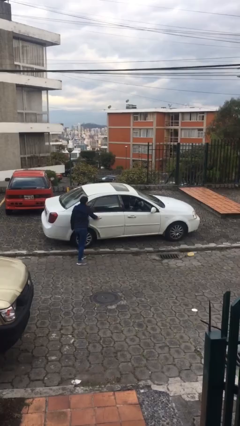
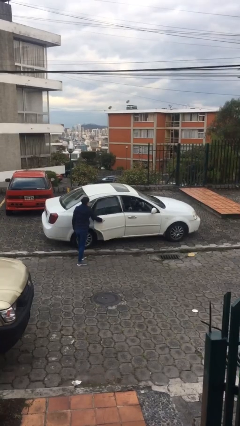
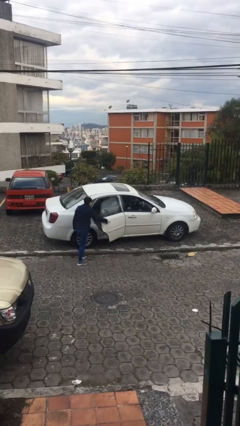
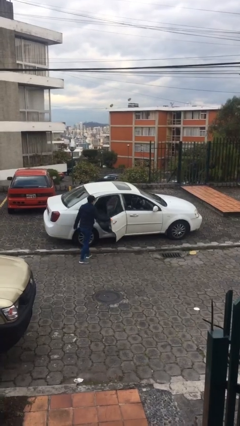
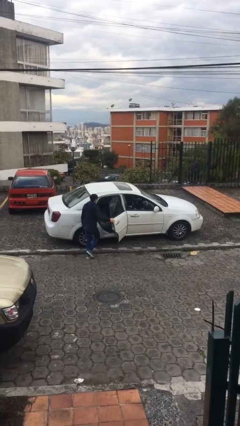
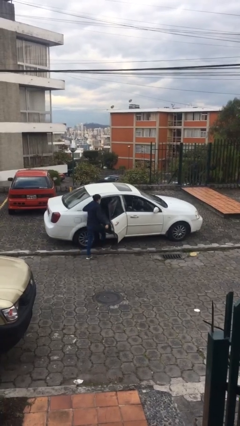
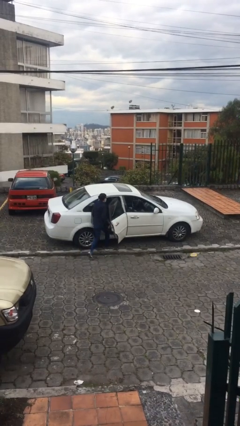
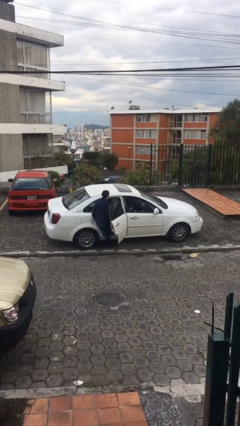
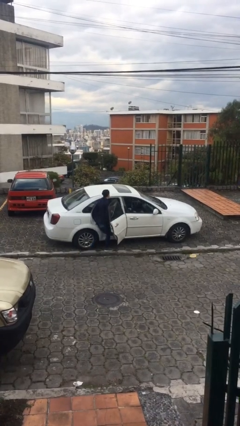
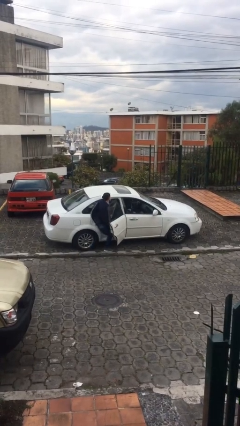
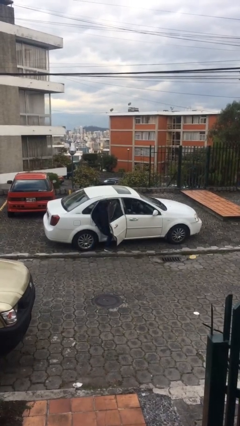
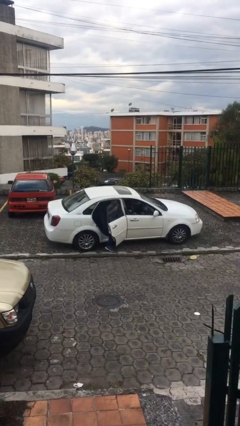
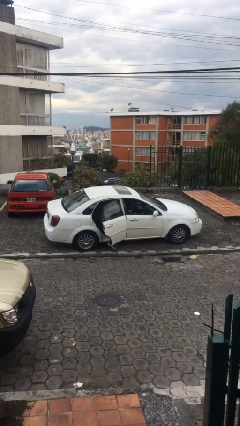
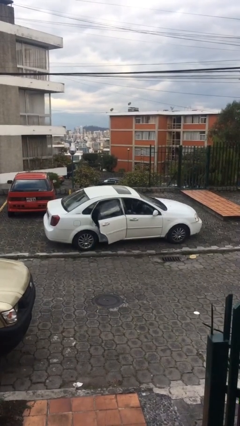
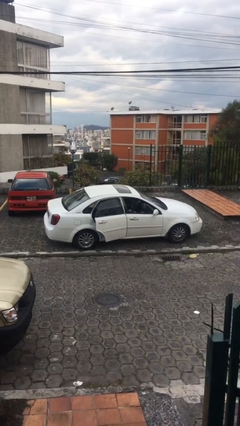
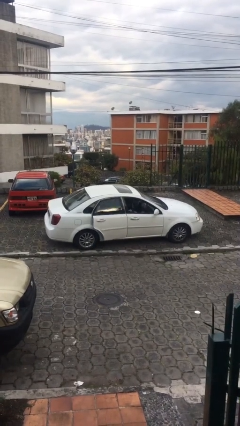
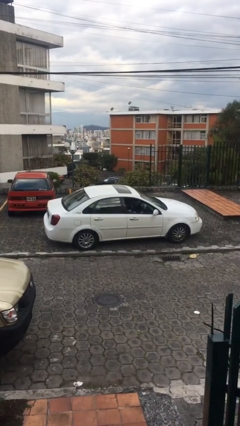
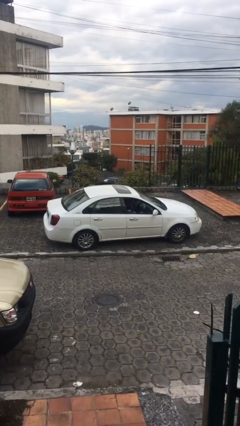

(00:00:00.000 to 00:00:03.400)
car picks up person

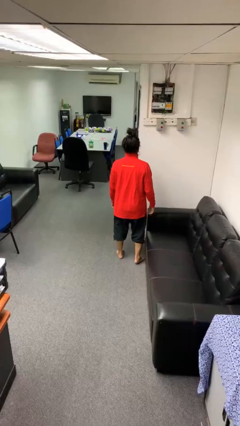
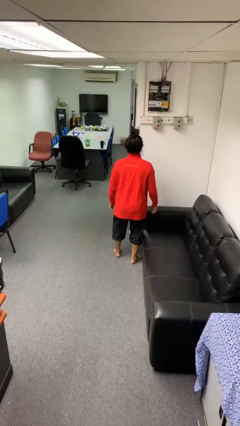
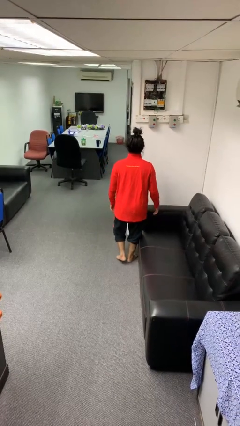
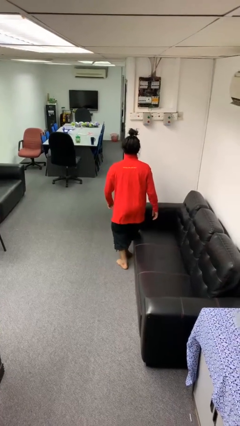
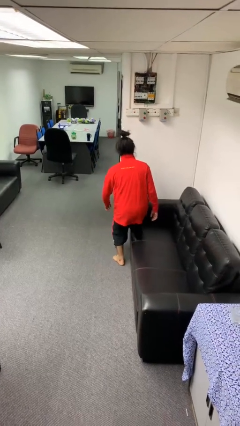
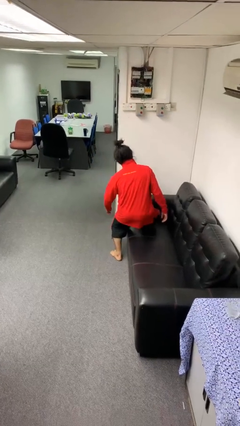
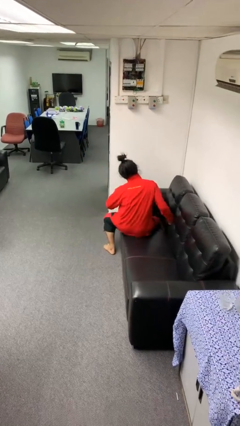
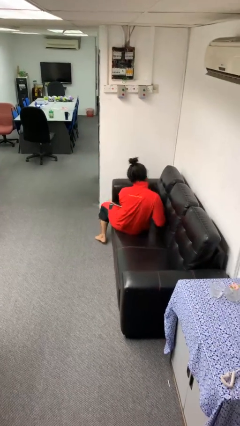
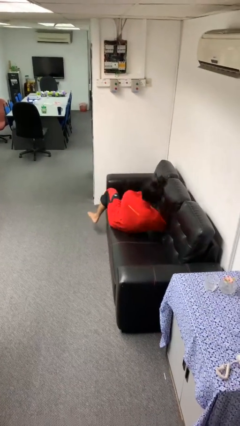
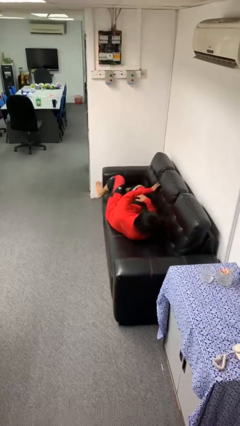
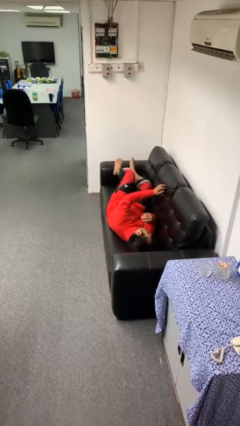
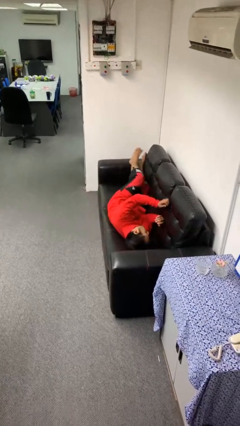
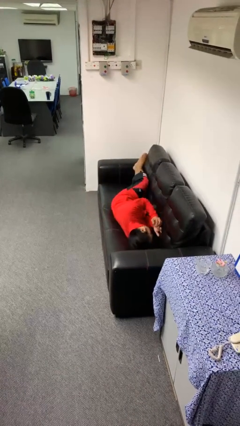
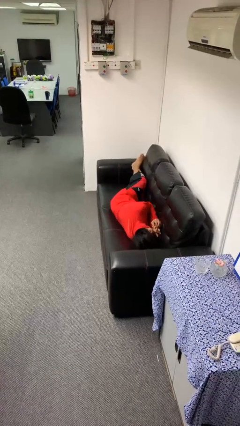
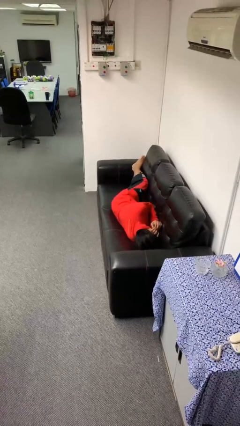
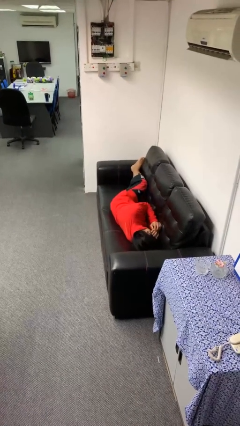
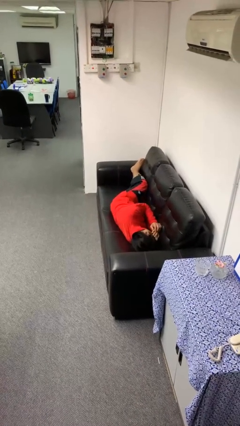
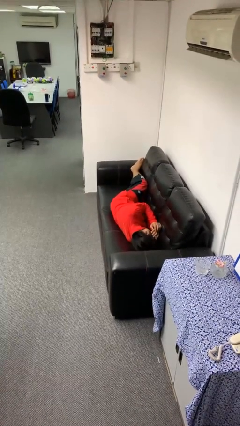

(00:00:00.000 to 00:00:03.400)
person lies down on couch

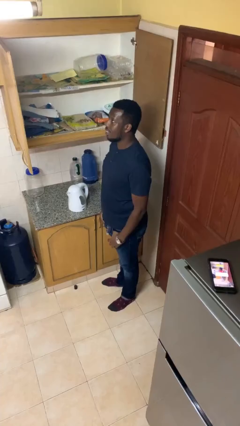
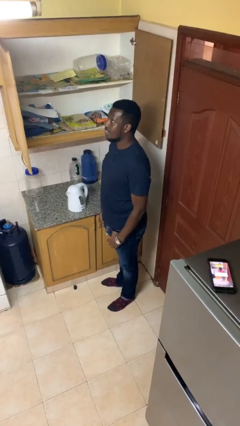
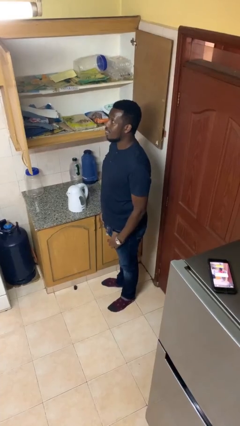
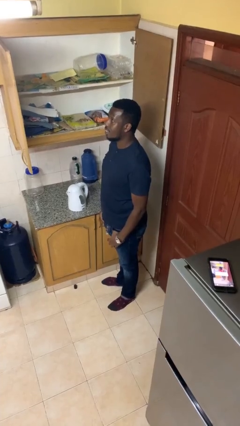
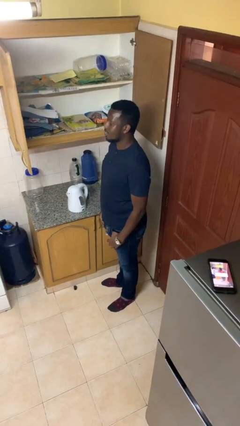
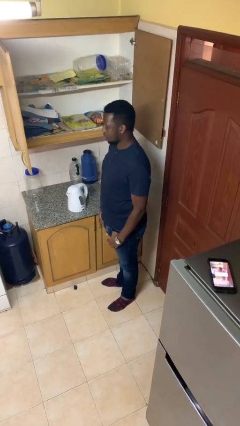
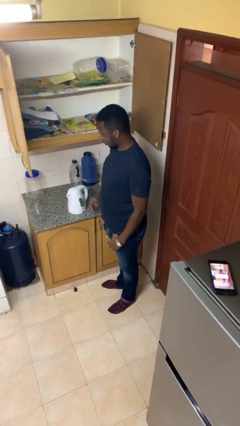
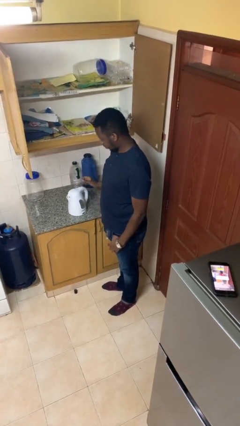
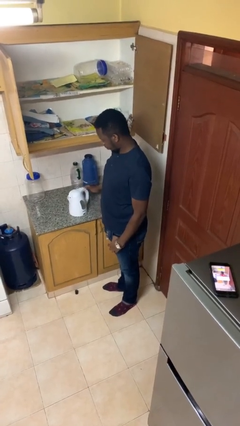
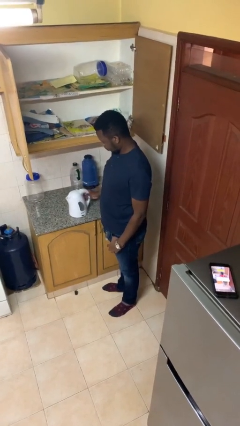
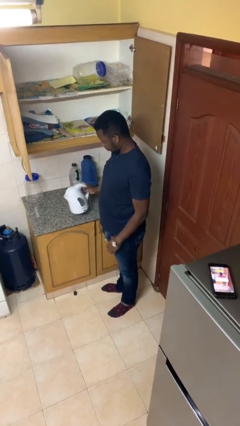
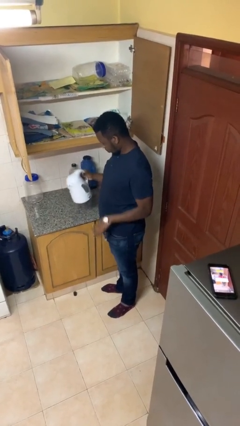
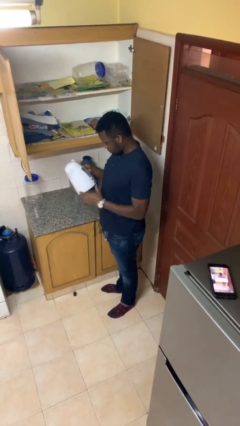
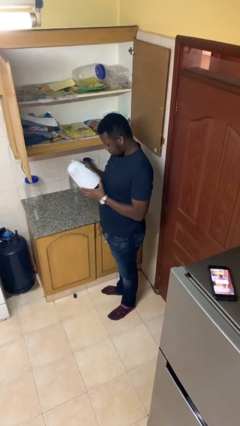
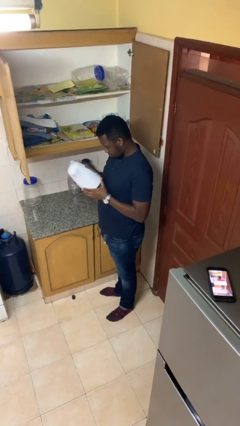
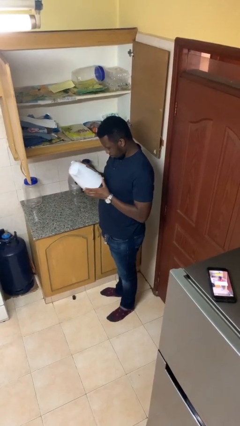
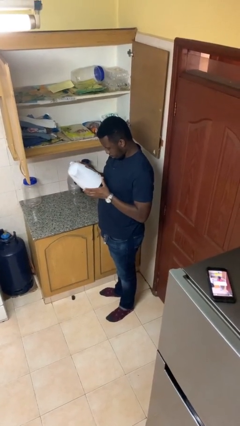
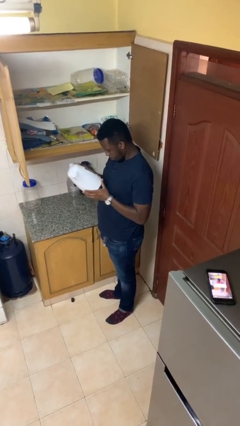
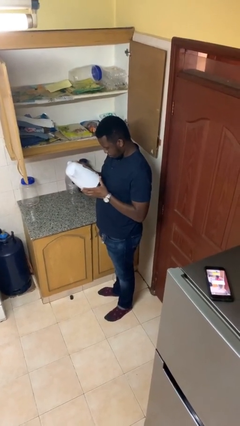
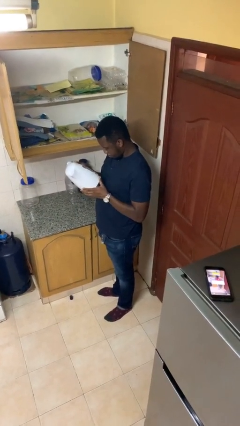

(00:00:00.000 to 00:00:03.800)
person picks up object from table

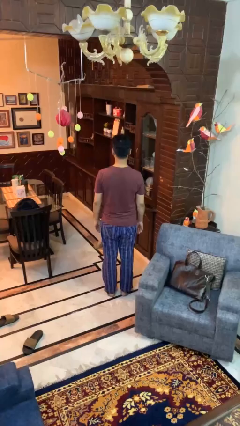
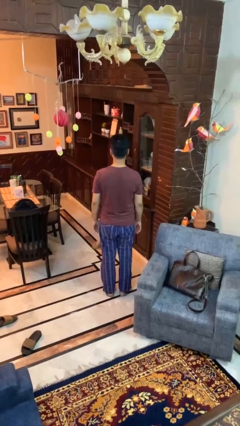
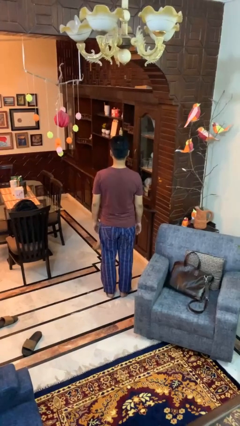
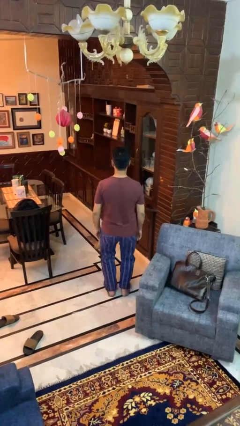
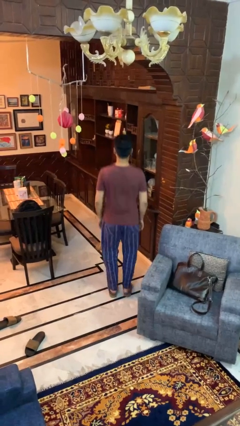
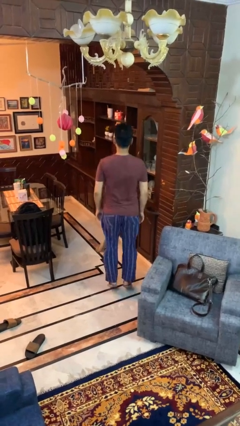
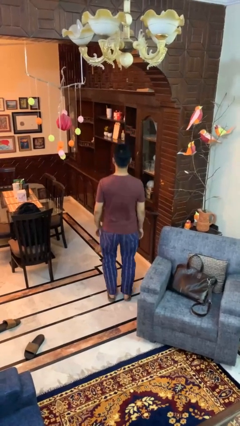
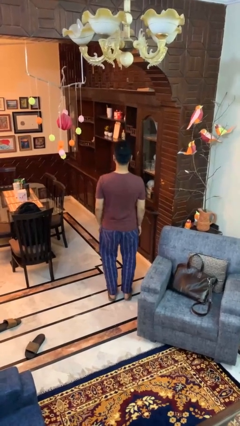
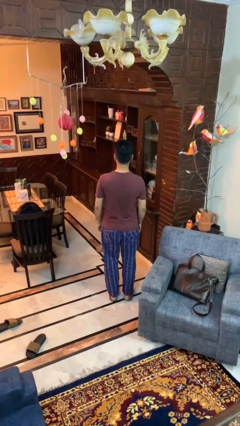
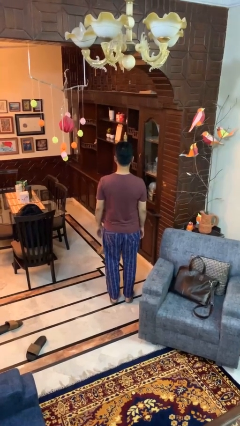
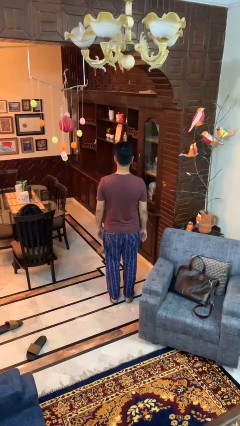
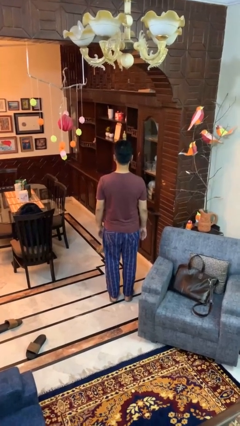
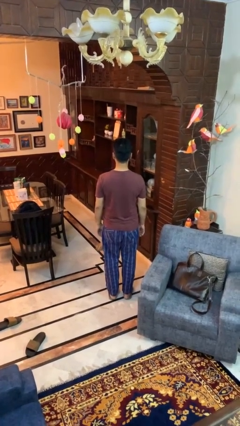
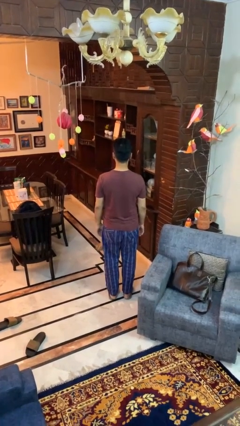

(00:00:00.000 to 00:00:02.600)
person jumps

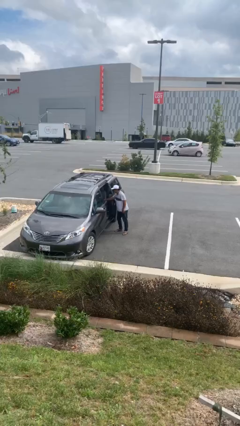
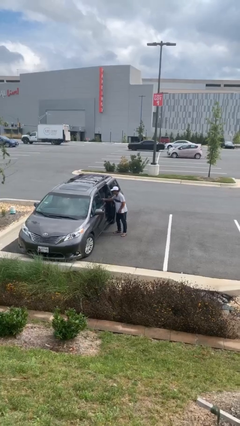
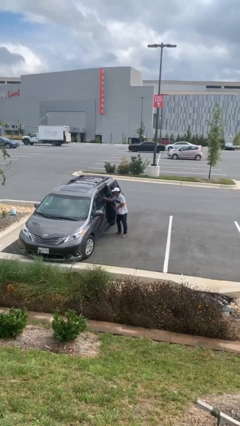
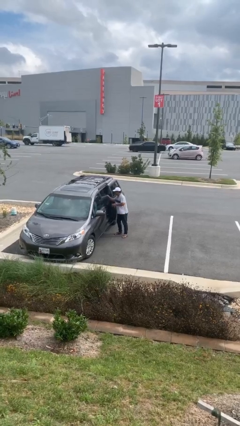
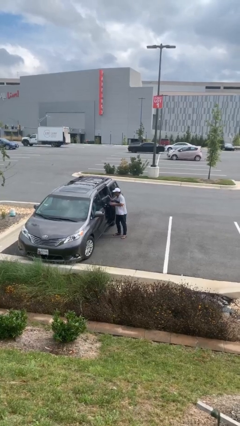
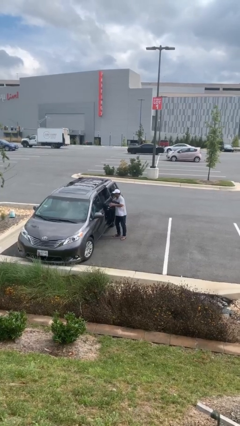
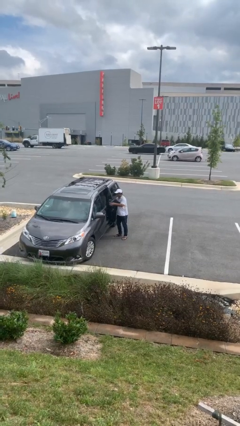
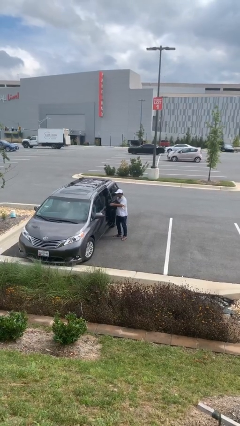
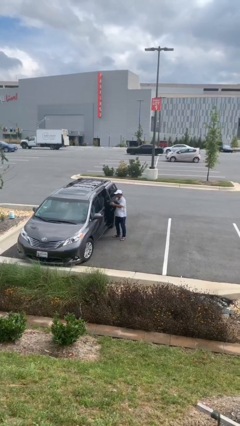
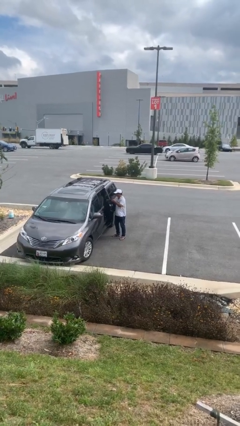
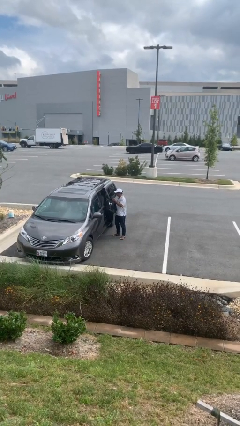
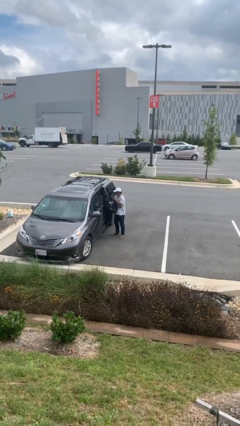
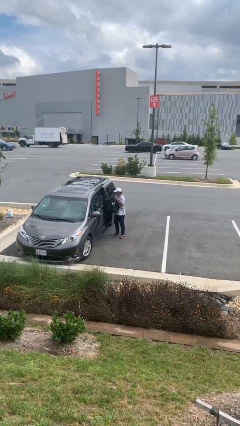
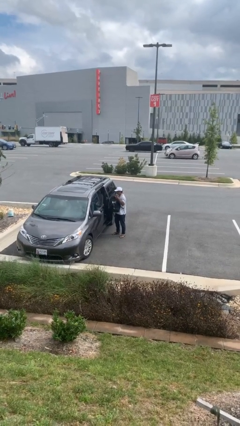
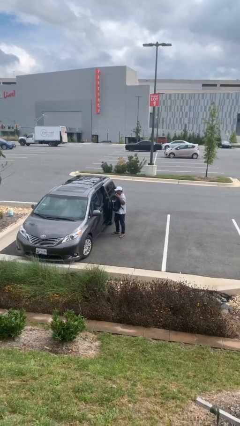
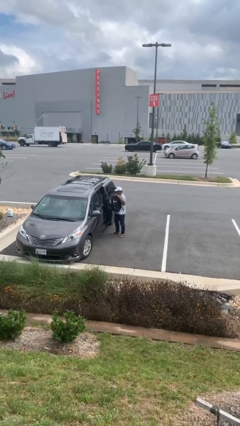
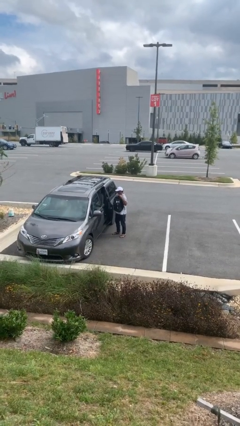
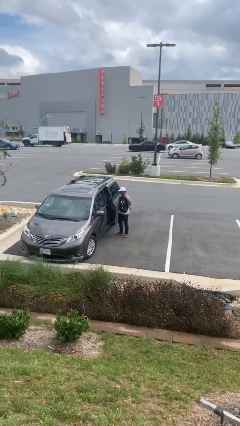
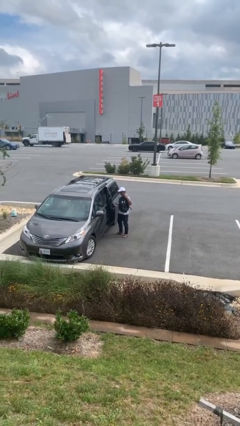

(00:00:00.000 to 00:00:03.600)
person unloads car

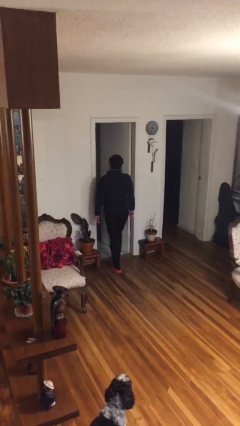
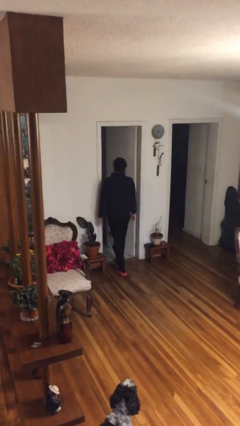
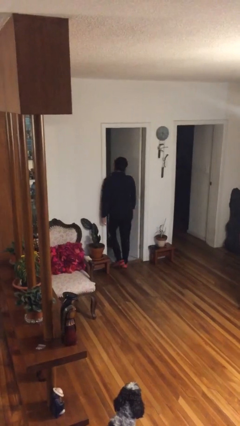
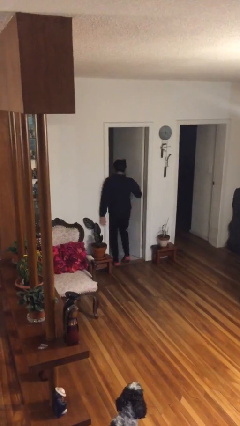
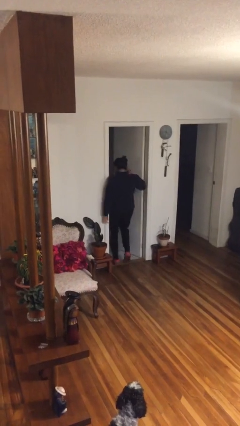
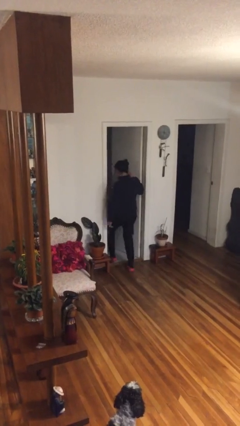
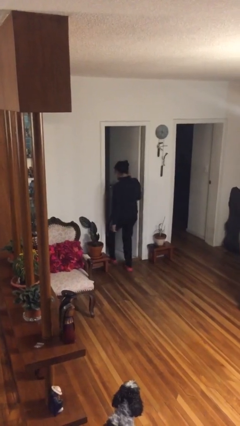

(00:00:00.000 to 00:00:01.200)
person bumps into wall

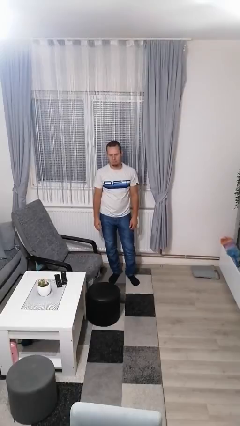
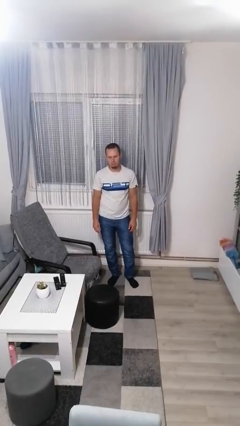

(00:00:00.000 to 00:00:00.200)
person trips on object on floor
